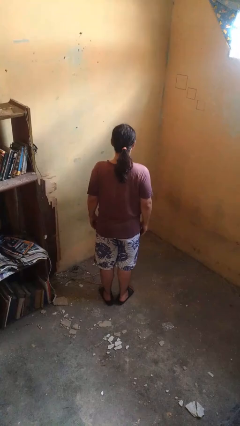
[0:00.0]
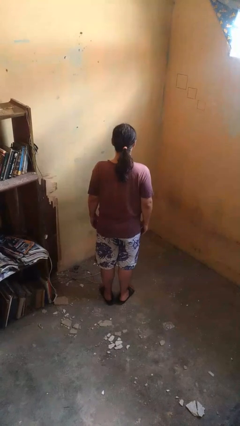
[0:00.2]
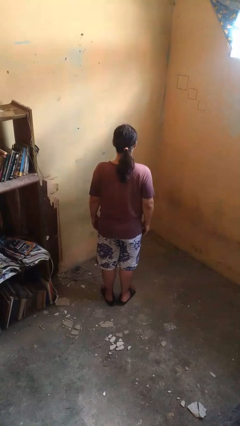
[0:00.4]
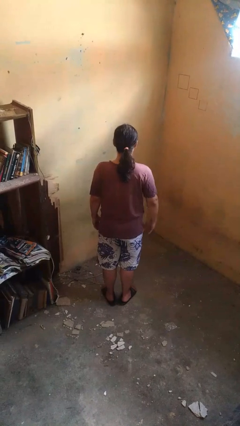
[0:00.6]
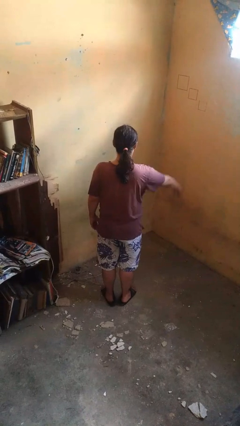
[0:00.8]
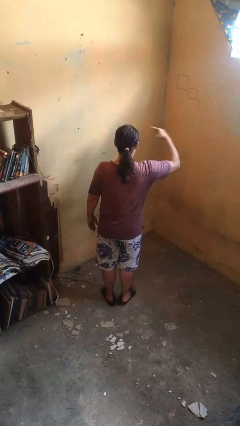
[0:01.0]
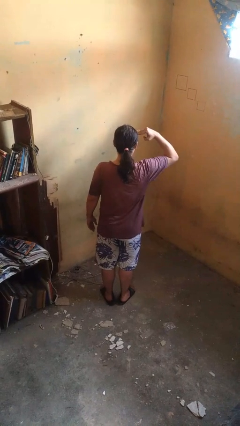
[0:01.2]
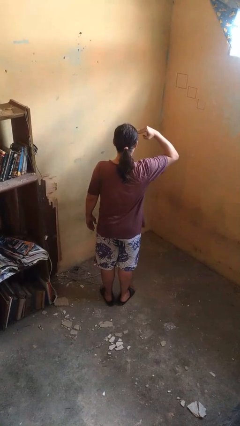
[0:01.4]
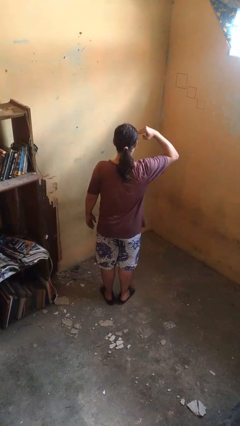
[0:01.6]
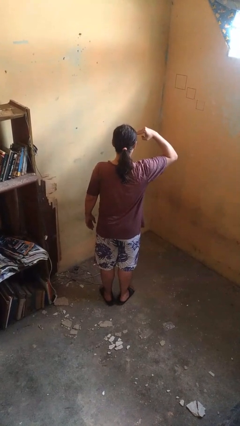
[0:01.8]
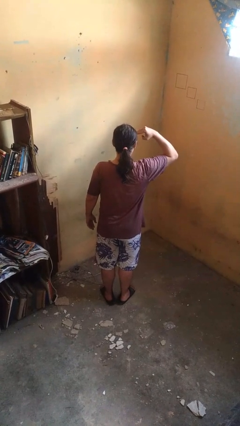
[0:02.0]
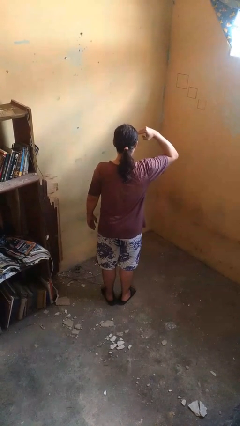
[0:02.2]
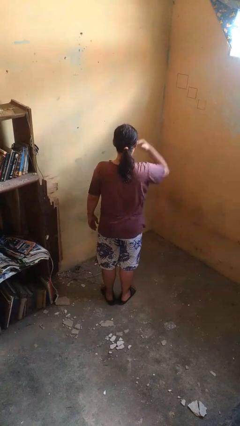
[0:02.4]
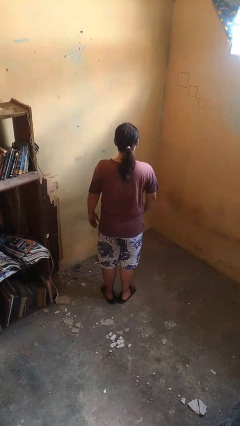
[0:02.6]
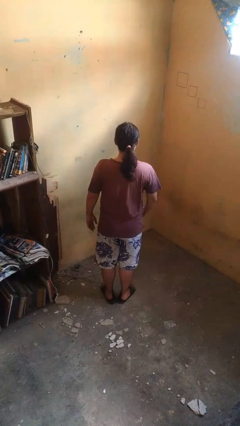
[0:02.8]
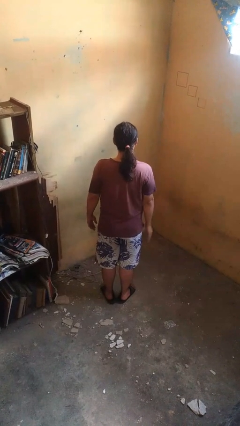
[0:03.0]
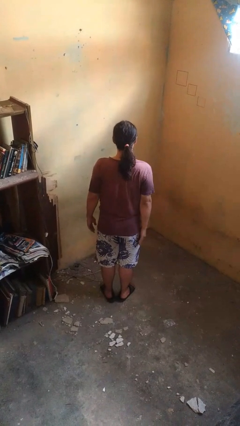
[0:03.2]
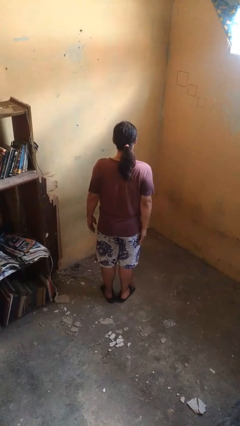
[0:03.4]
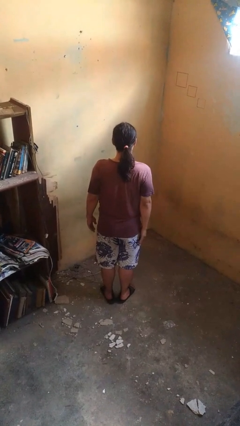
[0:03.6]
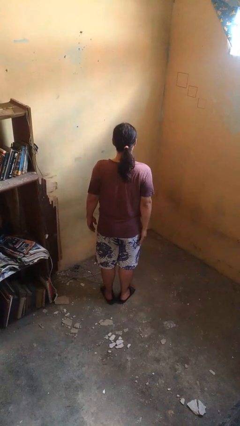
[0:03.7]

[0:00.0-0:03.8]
person salutes

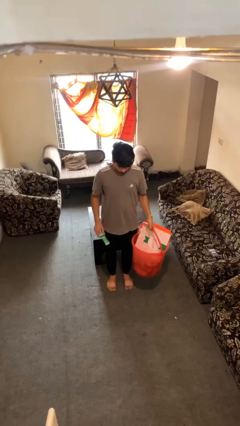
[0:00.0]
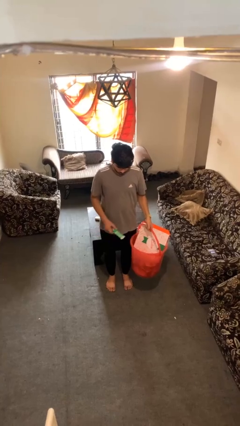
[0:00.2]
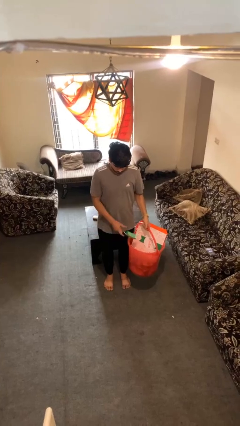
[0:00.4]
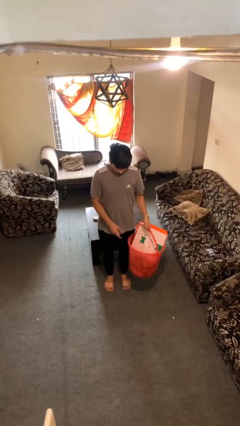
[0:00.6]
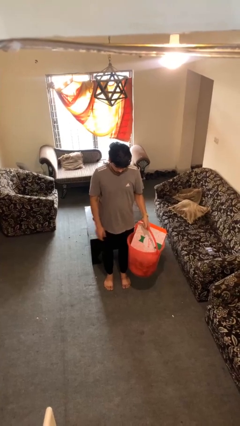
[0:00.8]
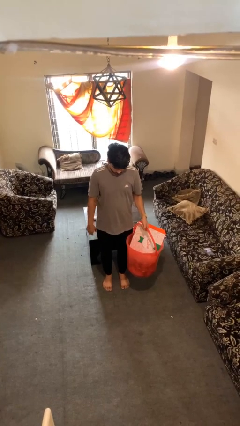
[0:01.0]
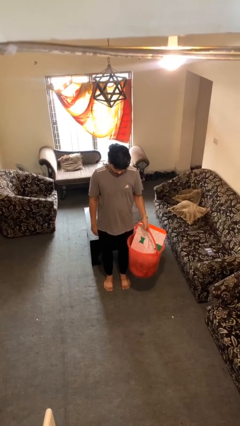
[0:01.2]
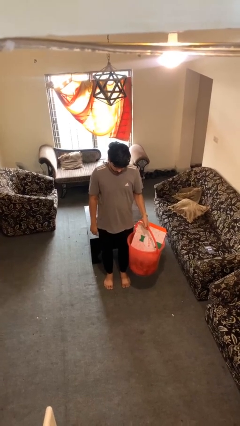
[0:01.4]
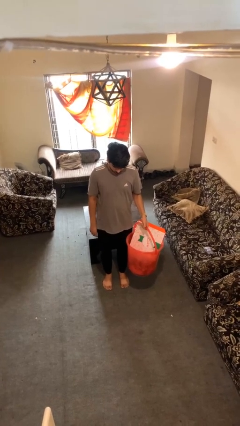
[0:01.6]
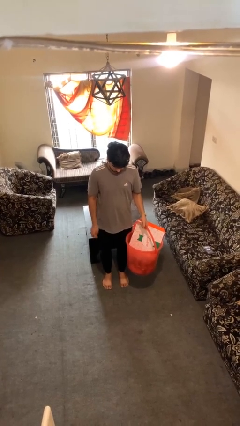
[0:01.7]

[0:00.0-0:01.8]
person puts object into basket

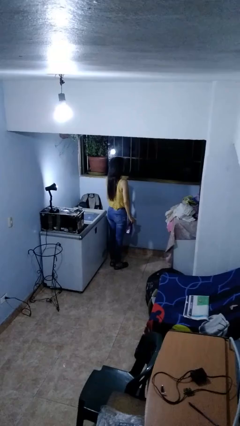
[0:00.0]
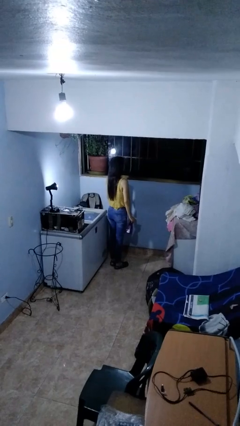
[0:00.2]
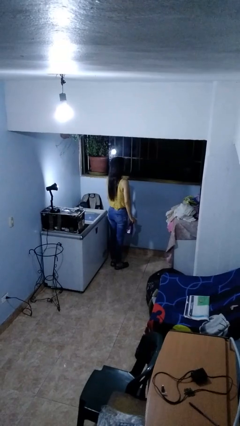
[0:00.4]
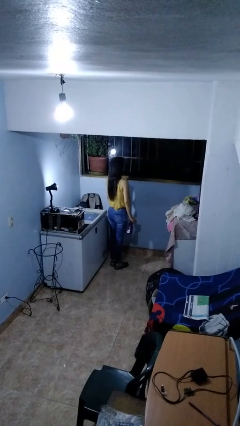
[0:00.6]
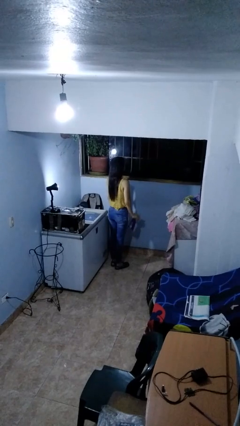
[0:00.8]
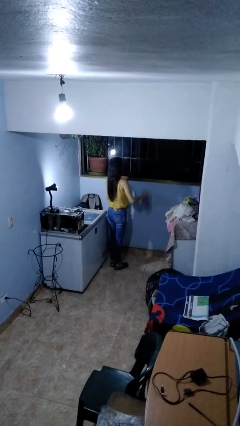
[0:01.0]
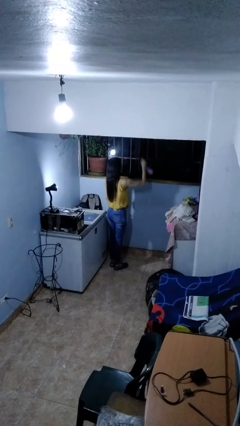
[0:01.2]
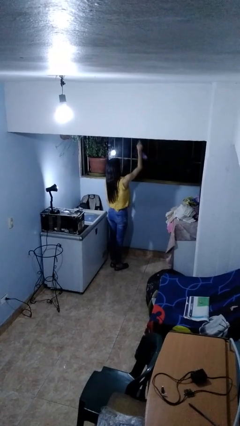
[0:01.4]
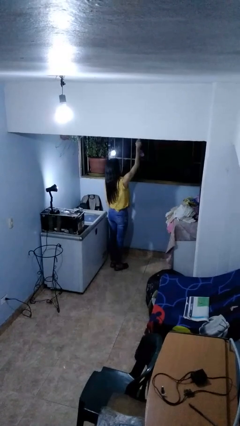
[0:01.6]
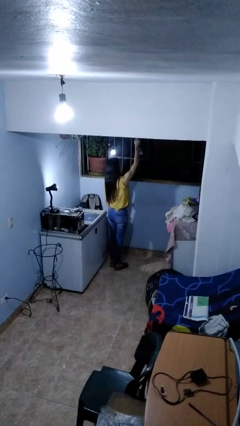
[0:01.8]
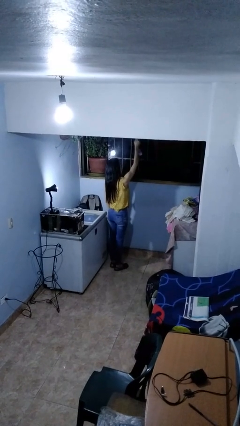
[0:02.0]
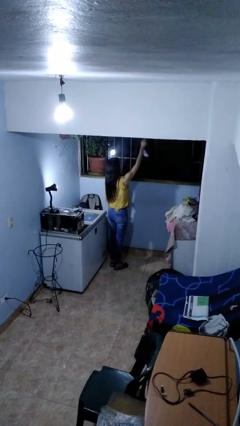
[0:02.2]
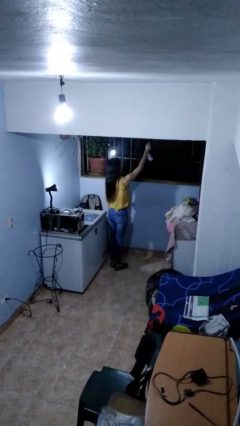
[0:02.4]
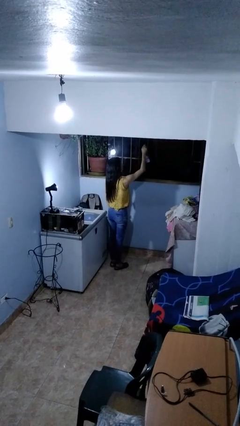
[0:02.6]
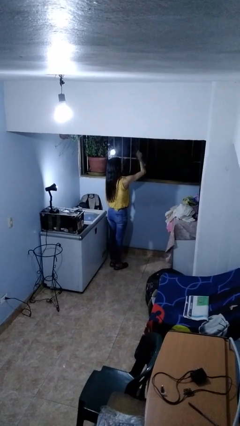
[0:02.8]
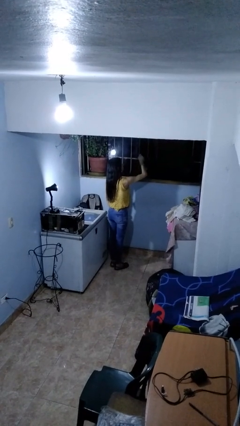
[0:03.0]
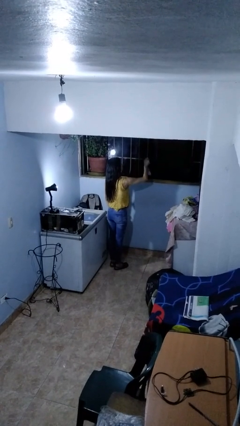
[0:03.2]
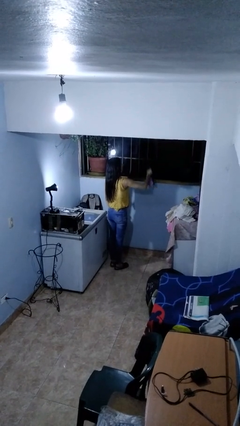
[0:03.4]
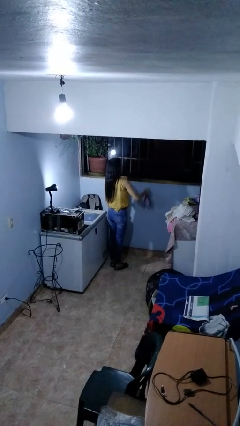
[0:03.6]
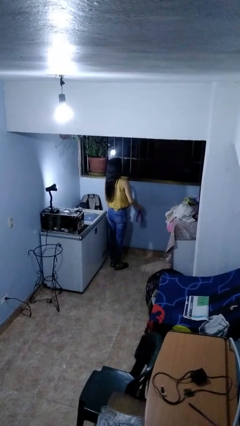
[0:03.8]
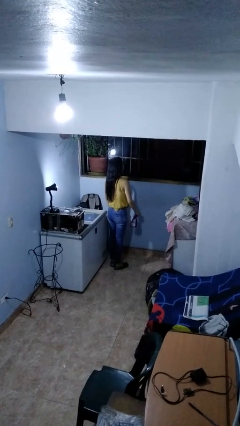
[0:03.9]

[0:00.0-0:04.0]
person sprays from bottle

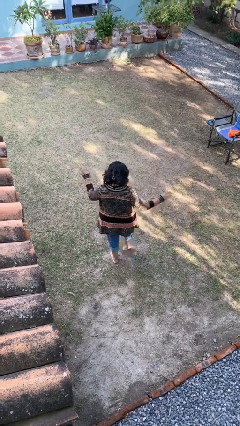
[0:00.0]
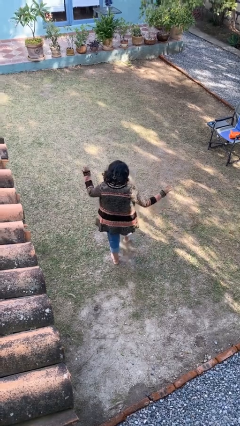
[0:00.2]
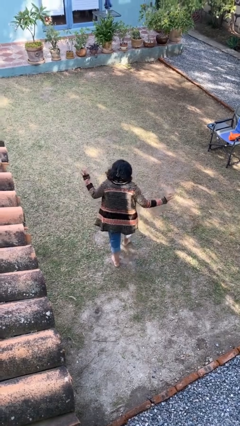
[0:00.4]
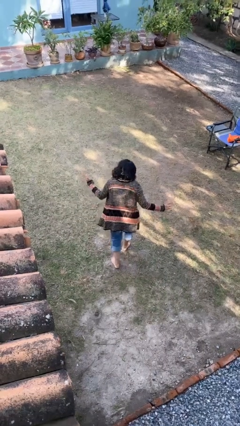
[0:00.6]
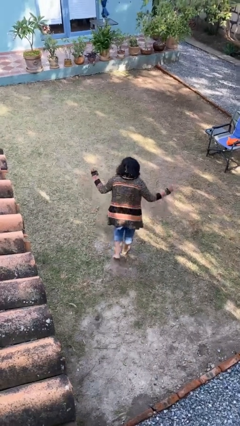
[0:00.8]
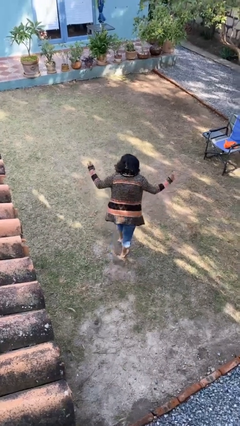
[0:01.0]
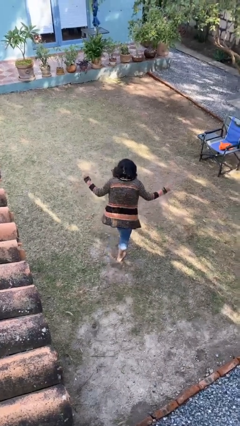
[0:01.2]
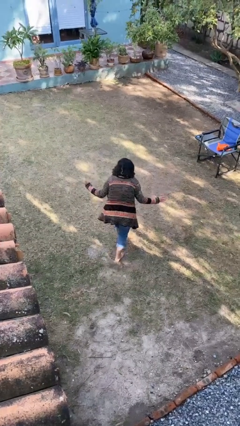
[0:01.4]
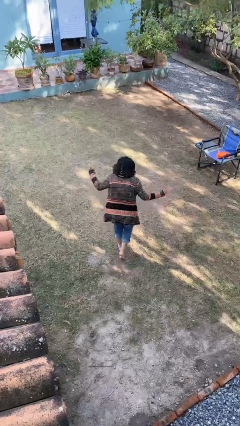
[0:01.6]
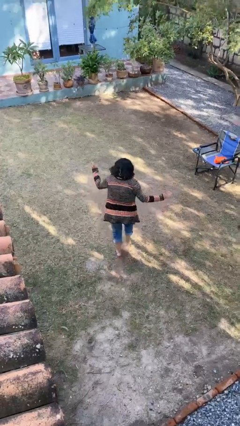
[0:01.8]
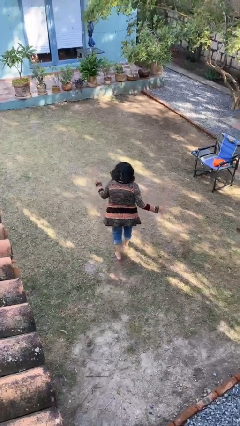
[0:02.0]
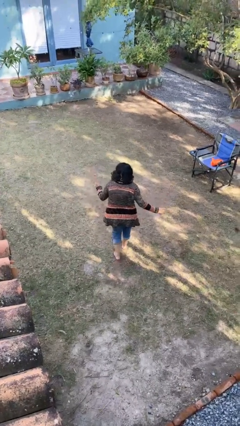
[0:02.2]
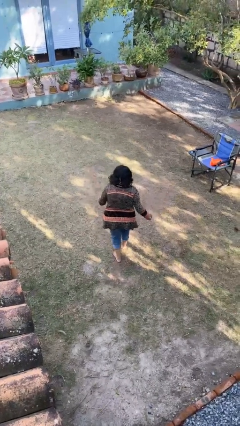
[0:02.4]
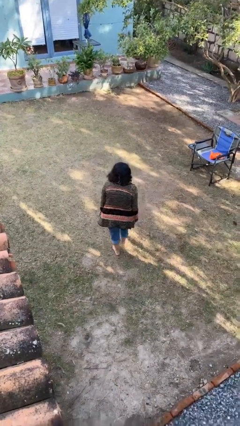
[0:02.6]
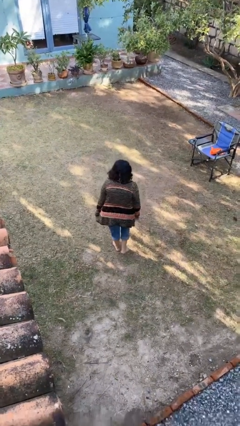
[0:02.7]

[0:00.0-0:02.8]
person walks tiptoe

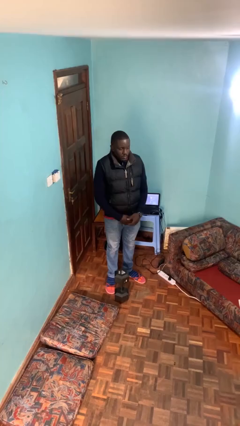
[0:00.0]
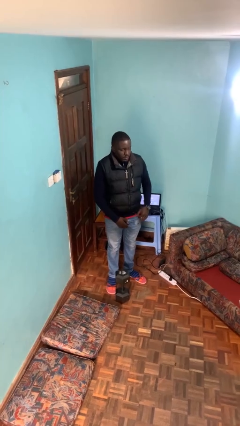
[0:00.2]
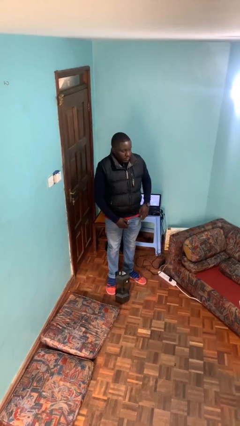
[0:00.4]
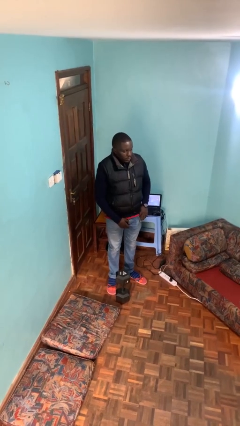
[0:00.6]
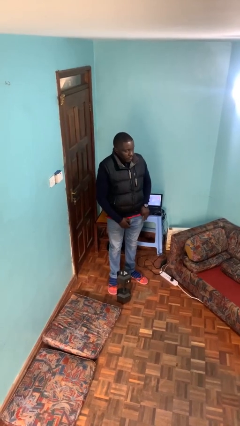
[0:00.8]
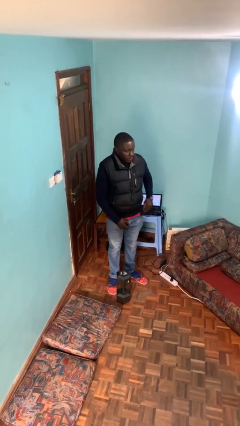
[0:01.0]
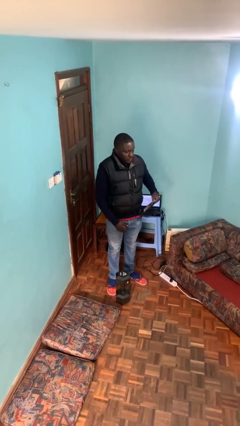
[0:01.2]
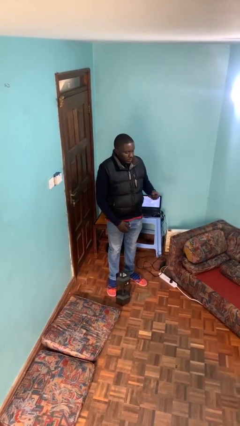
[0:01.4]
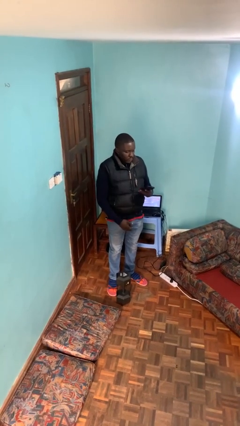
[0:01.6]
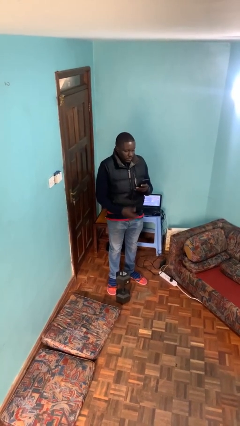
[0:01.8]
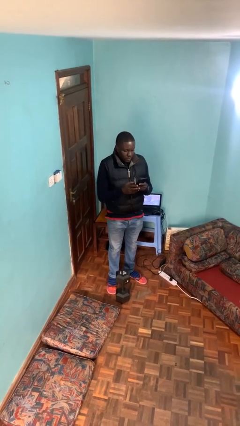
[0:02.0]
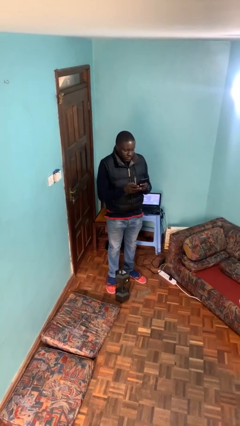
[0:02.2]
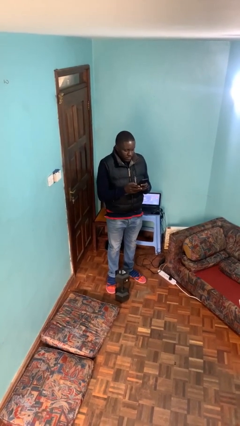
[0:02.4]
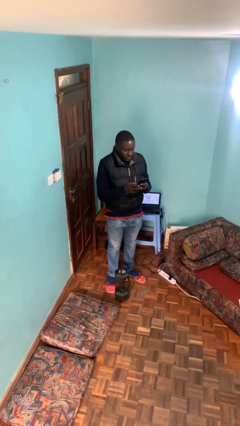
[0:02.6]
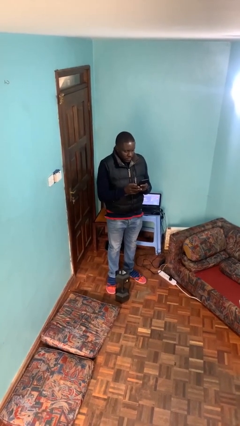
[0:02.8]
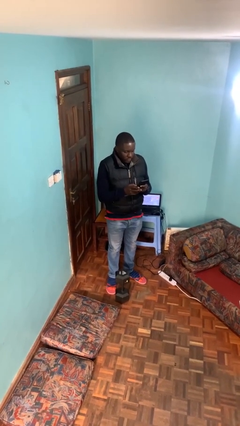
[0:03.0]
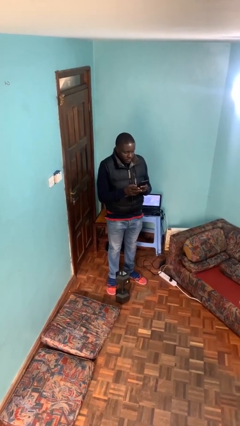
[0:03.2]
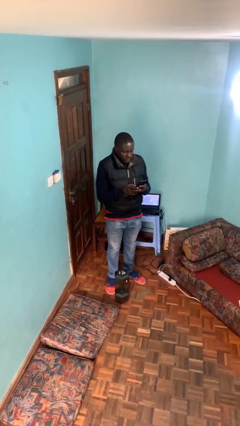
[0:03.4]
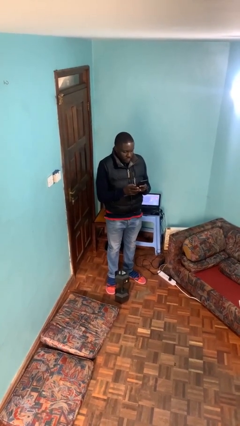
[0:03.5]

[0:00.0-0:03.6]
person takes phone from pocket

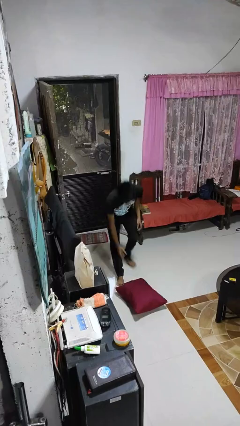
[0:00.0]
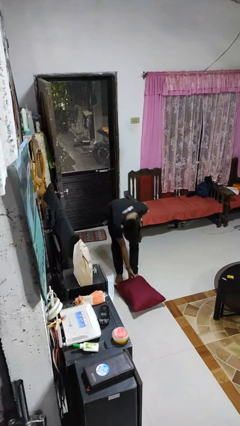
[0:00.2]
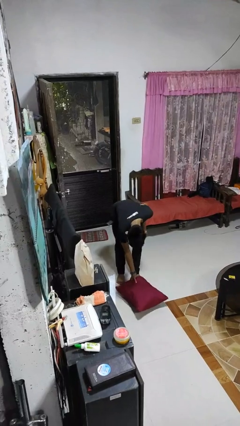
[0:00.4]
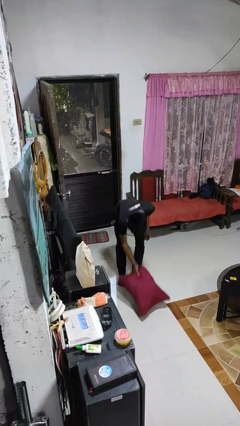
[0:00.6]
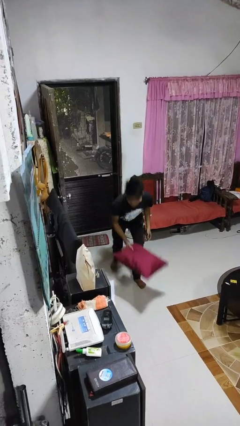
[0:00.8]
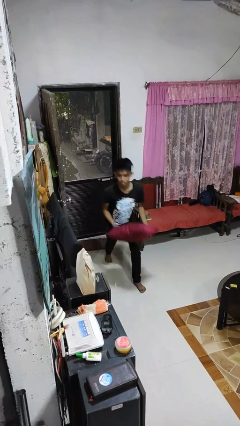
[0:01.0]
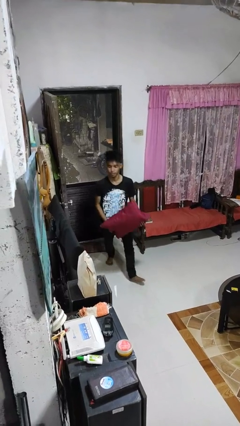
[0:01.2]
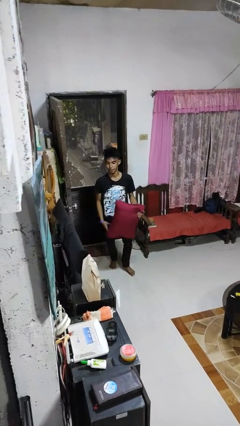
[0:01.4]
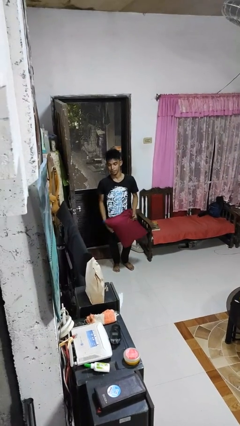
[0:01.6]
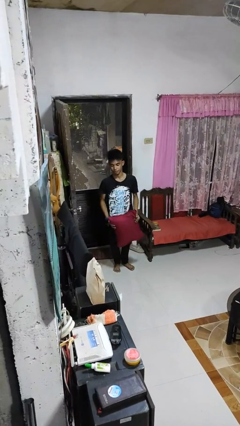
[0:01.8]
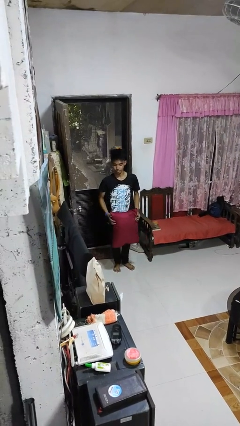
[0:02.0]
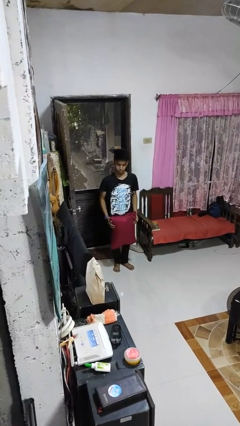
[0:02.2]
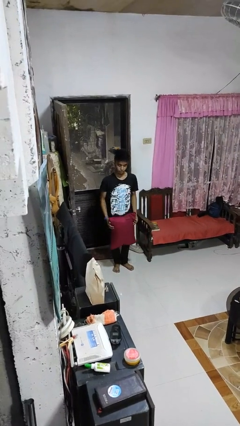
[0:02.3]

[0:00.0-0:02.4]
person picks up object from floor
